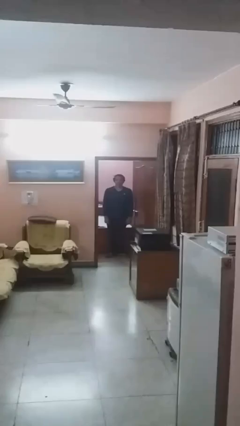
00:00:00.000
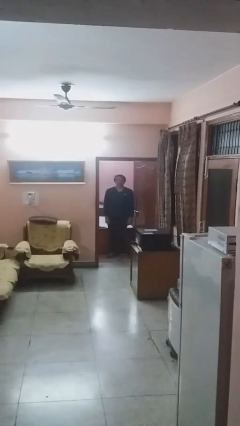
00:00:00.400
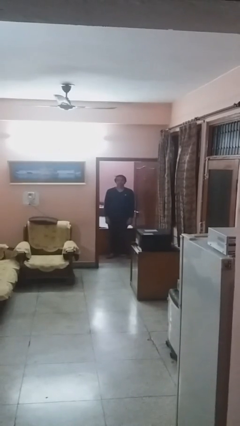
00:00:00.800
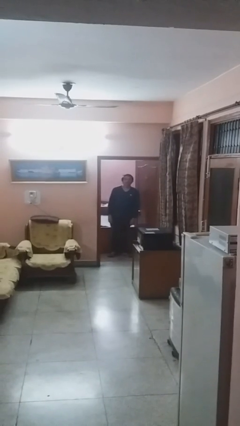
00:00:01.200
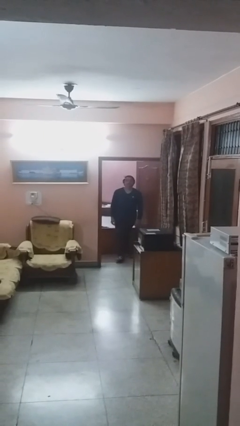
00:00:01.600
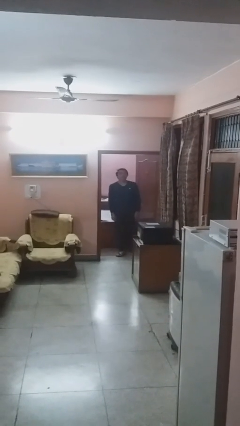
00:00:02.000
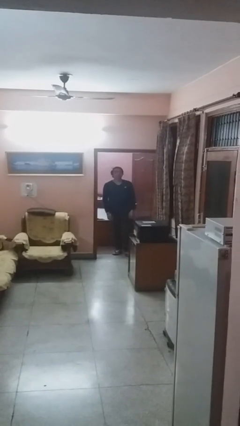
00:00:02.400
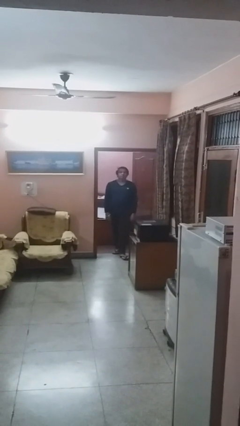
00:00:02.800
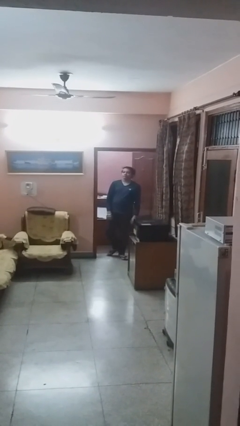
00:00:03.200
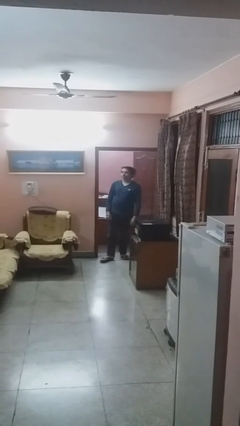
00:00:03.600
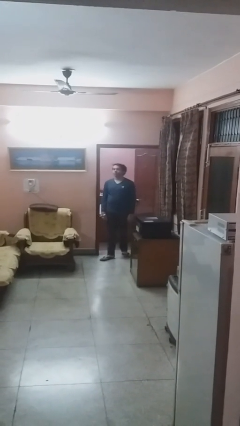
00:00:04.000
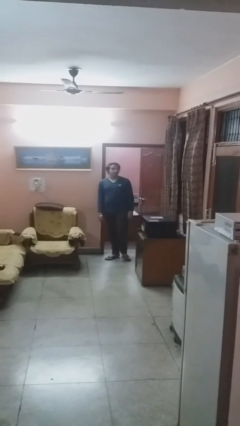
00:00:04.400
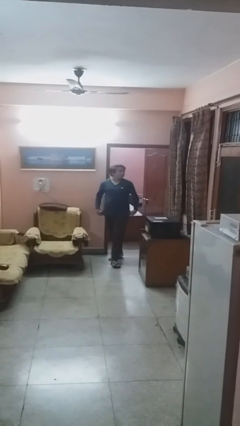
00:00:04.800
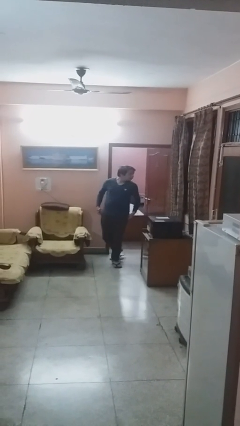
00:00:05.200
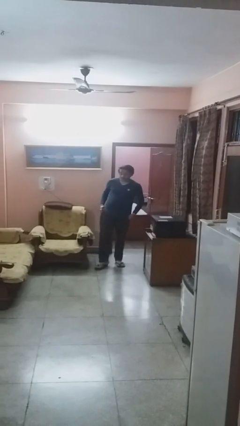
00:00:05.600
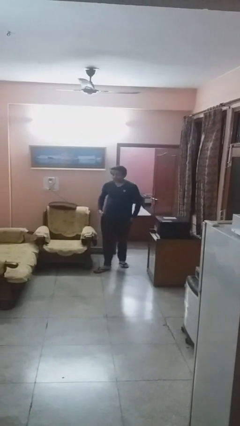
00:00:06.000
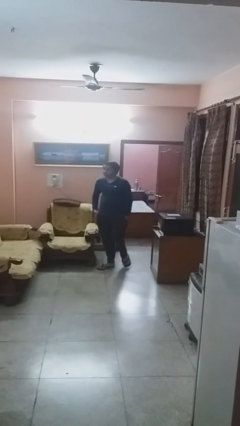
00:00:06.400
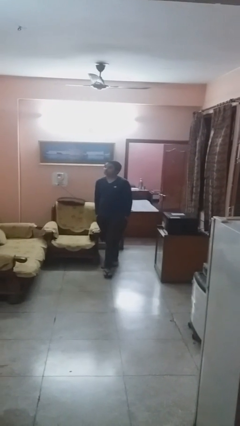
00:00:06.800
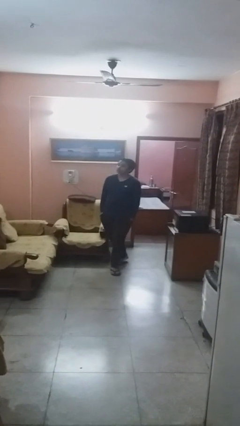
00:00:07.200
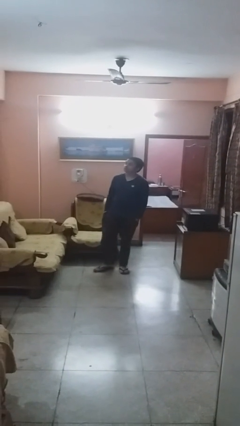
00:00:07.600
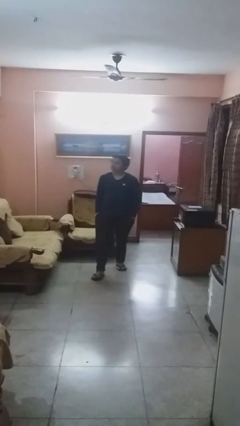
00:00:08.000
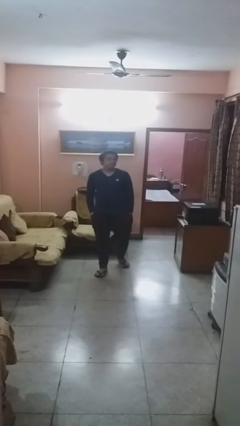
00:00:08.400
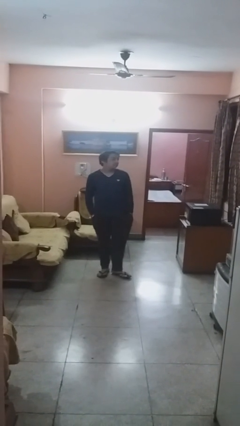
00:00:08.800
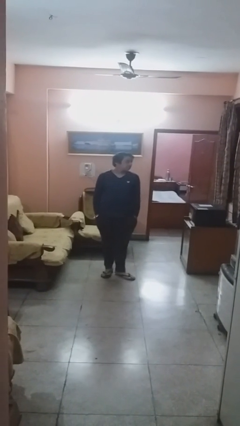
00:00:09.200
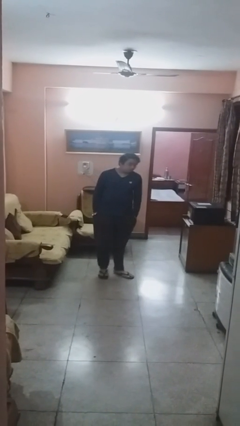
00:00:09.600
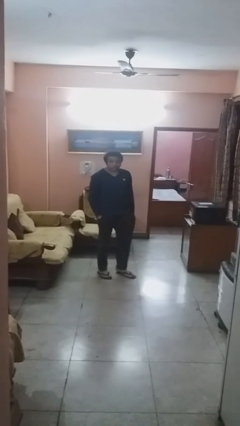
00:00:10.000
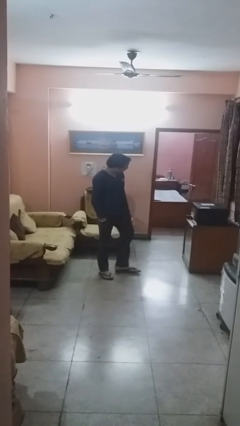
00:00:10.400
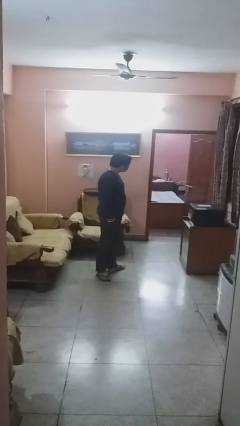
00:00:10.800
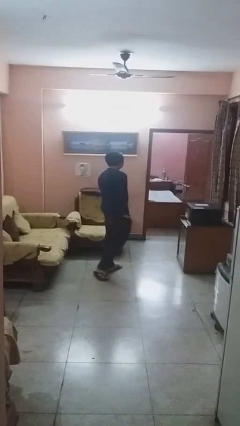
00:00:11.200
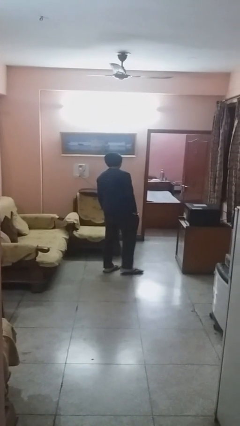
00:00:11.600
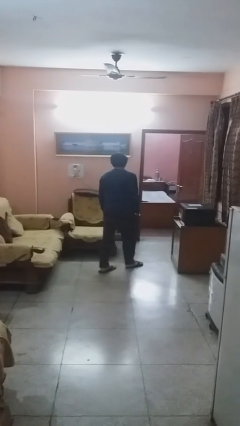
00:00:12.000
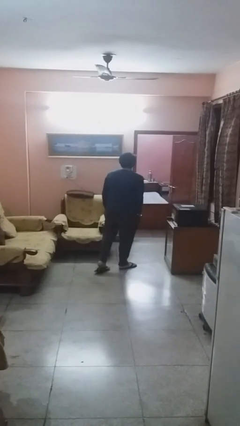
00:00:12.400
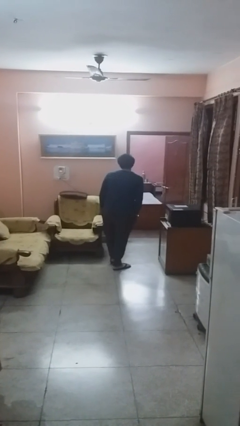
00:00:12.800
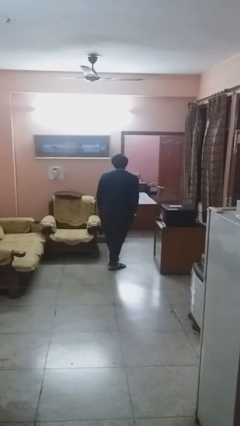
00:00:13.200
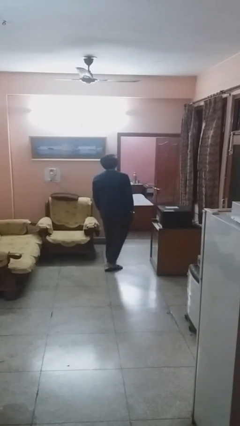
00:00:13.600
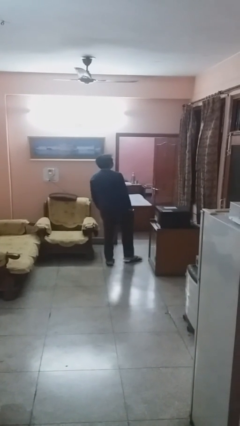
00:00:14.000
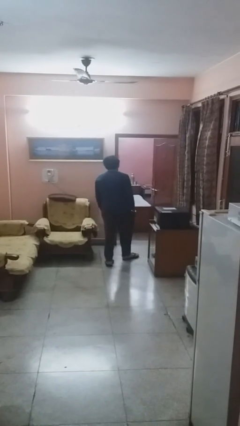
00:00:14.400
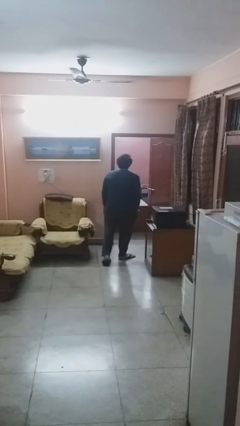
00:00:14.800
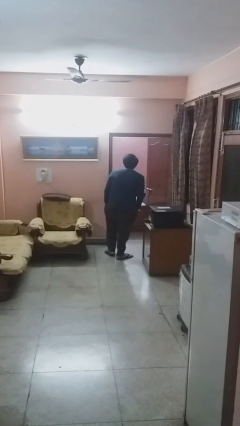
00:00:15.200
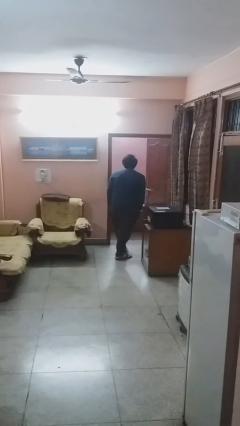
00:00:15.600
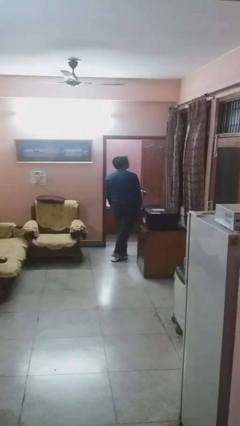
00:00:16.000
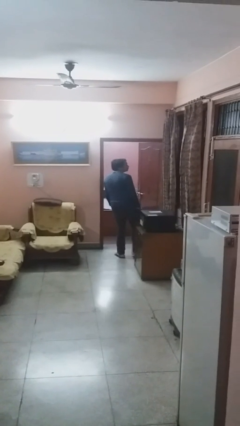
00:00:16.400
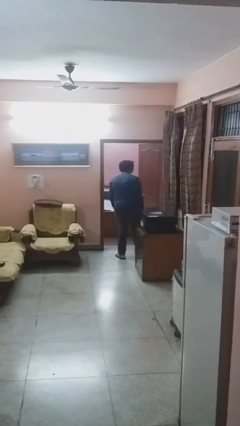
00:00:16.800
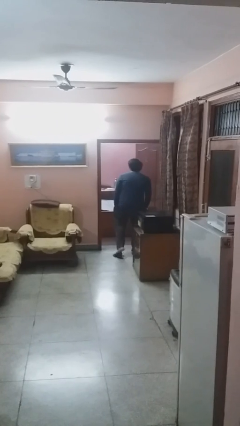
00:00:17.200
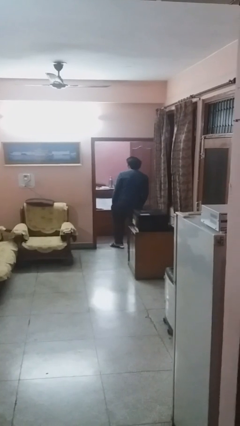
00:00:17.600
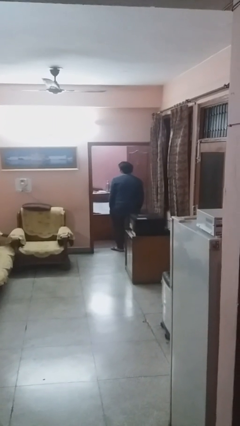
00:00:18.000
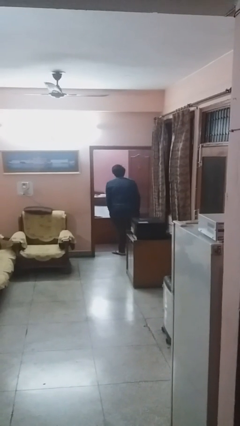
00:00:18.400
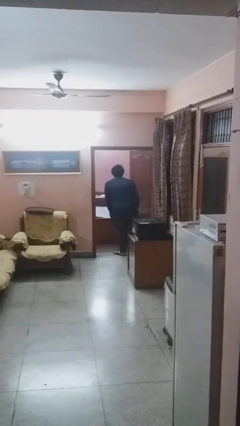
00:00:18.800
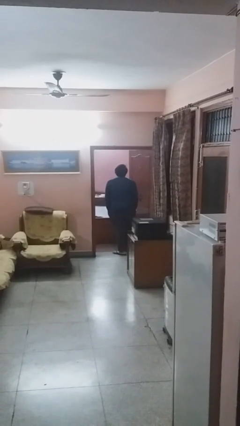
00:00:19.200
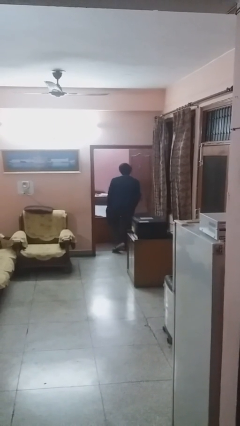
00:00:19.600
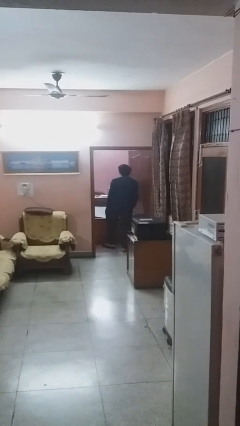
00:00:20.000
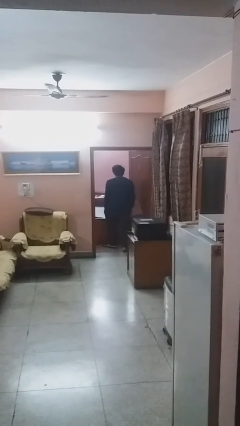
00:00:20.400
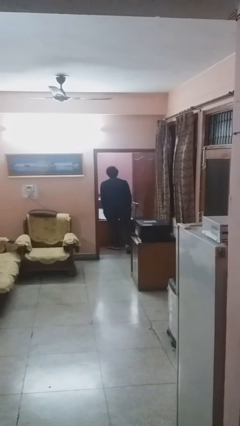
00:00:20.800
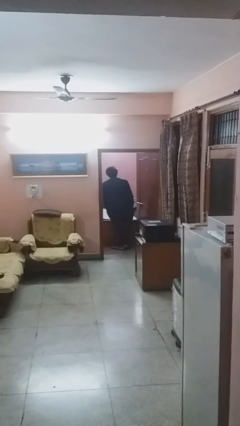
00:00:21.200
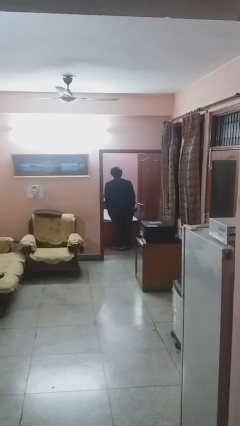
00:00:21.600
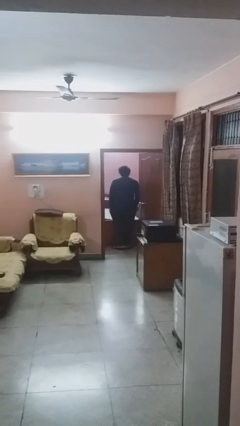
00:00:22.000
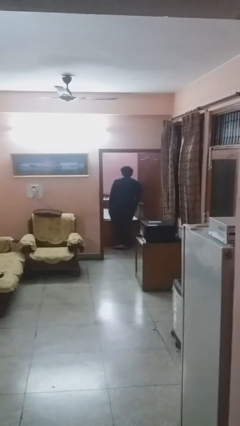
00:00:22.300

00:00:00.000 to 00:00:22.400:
person walks

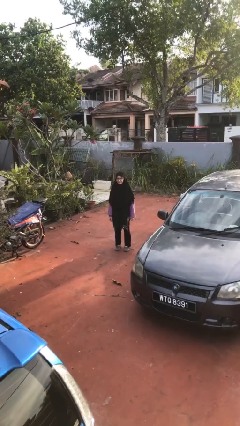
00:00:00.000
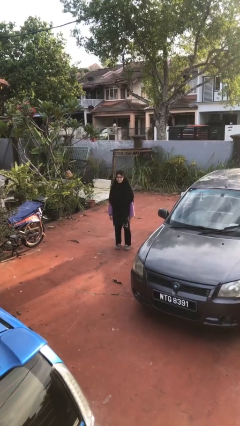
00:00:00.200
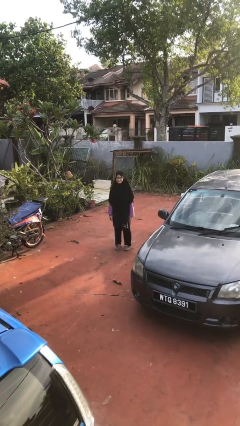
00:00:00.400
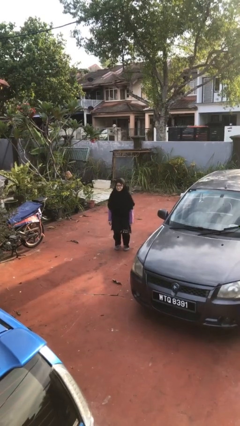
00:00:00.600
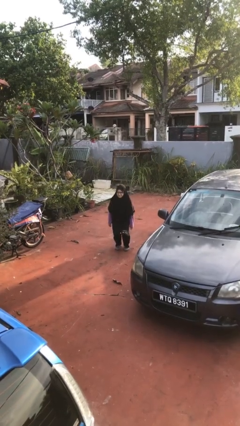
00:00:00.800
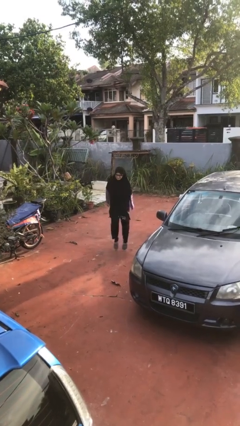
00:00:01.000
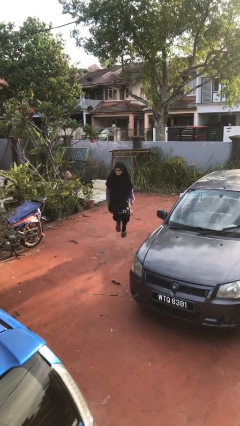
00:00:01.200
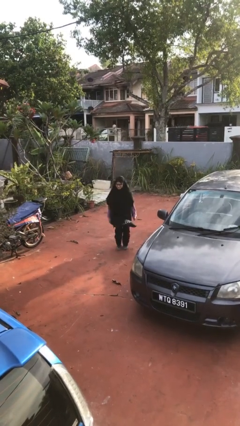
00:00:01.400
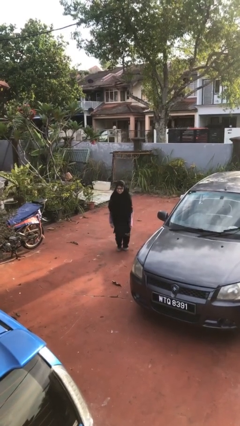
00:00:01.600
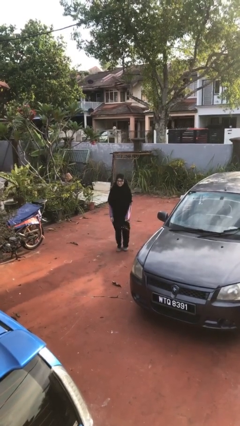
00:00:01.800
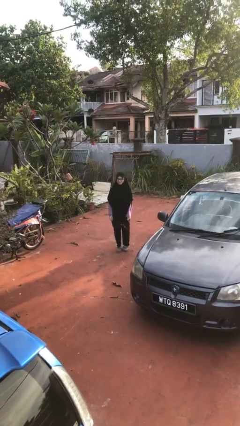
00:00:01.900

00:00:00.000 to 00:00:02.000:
person jumps

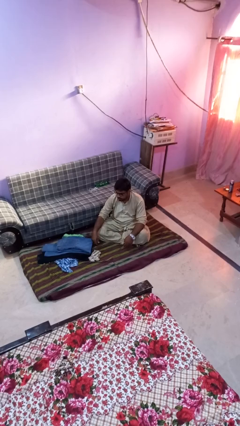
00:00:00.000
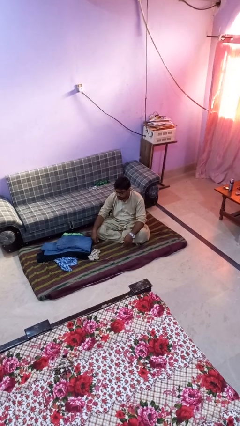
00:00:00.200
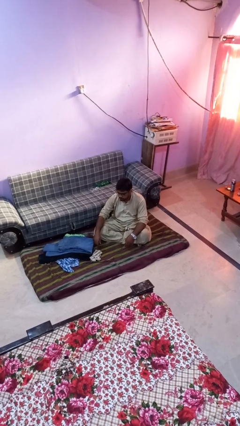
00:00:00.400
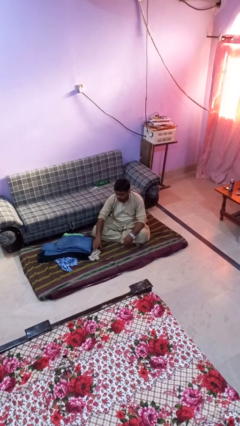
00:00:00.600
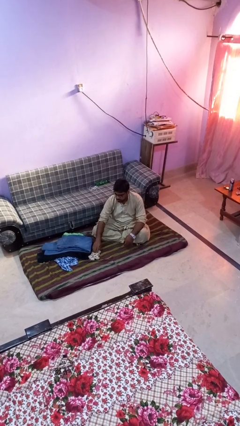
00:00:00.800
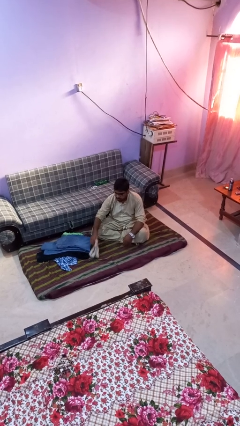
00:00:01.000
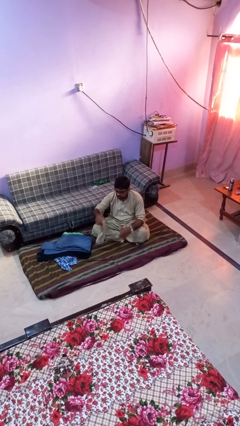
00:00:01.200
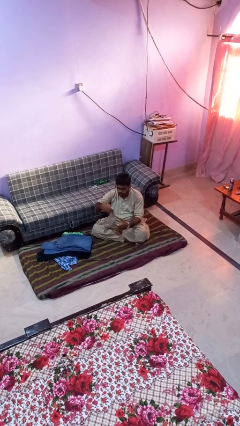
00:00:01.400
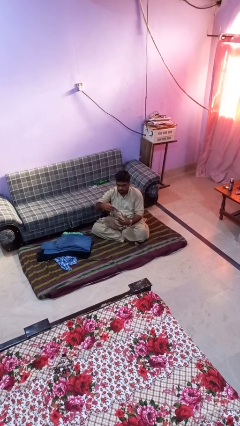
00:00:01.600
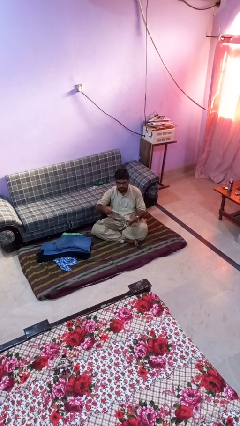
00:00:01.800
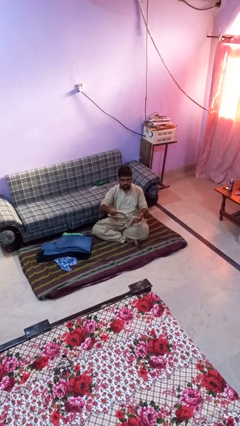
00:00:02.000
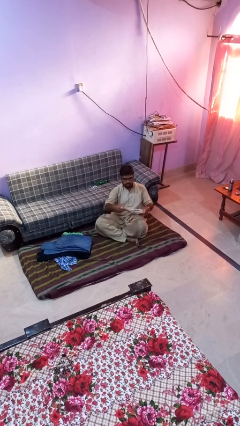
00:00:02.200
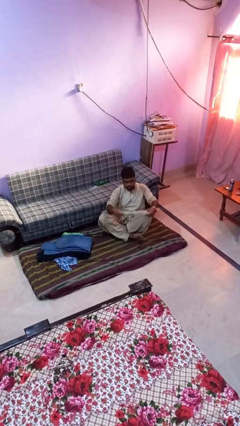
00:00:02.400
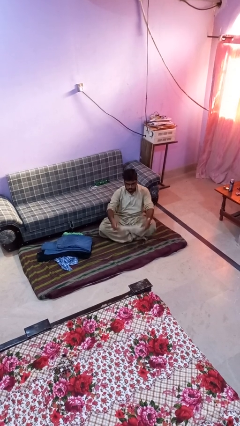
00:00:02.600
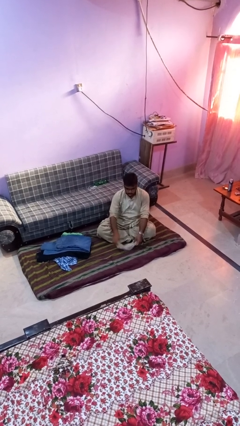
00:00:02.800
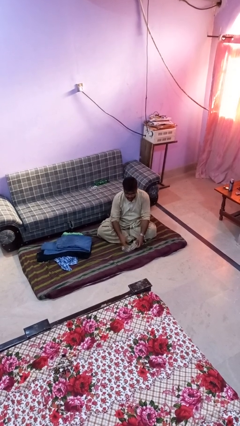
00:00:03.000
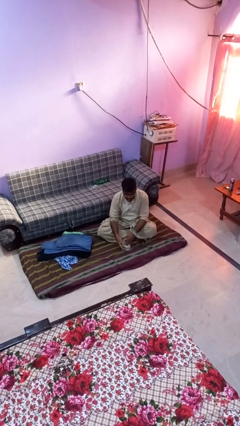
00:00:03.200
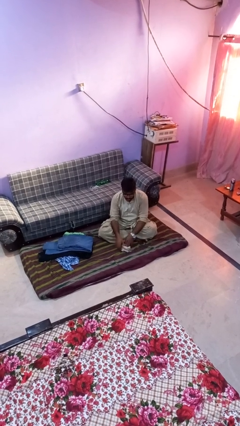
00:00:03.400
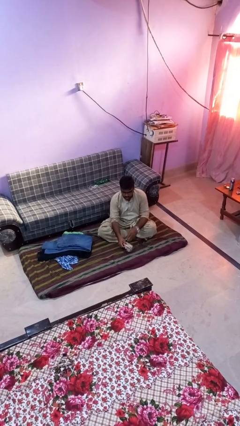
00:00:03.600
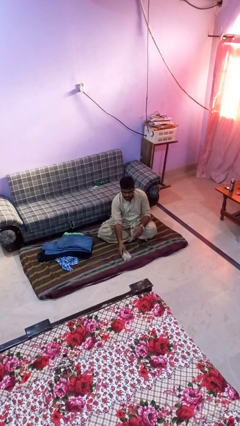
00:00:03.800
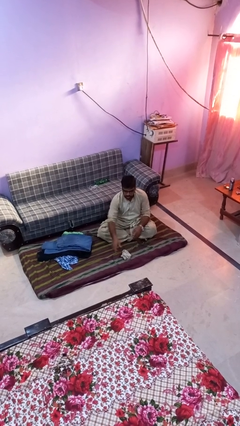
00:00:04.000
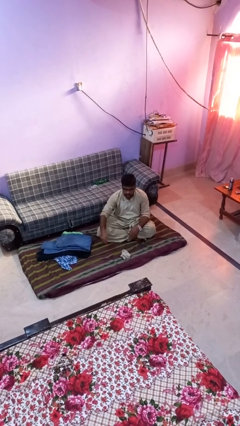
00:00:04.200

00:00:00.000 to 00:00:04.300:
person folds socks

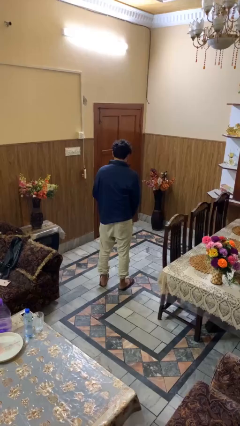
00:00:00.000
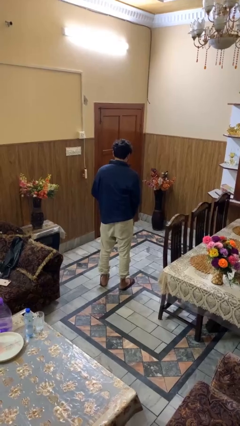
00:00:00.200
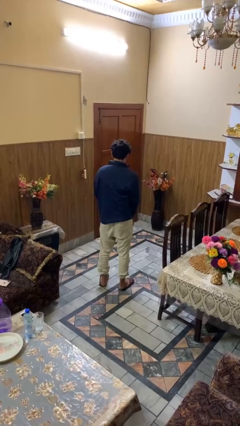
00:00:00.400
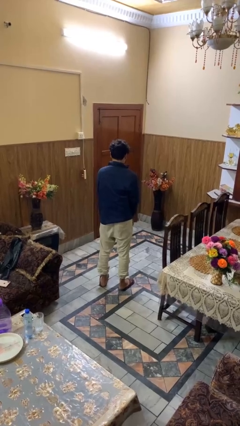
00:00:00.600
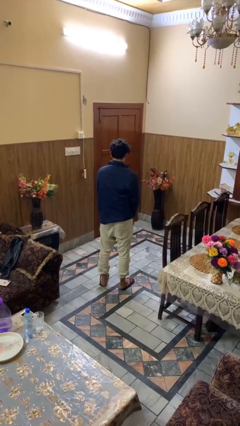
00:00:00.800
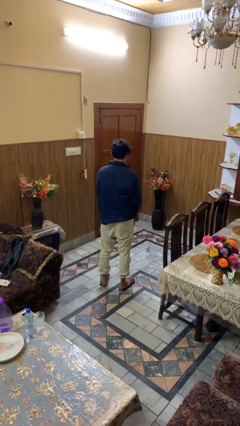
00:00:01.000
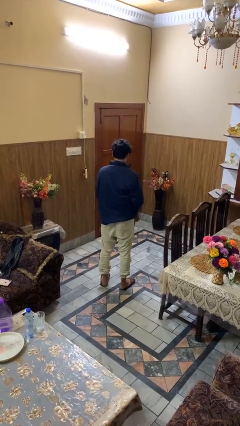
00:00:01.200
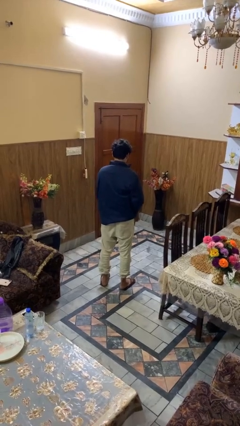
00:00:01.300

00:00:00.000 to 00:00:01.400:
person unzips jacket
